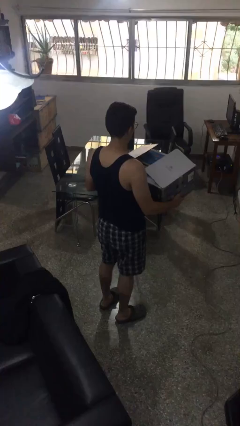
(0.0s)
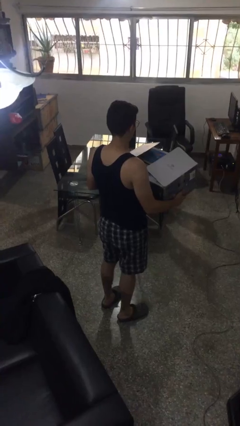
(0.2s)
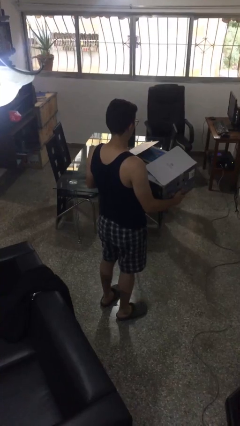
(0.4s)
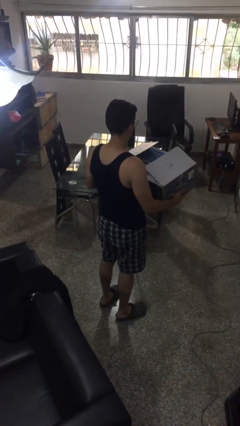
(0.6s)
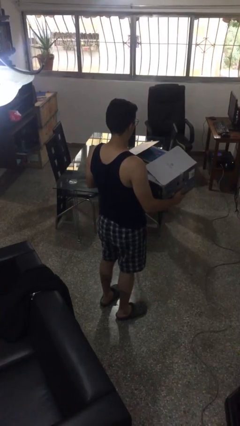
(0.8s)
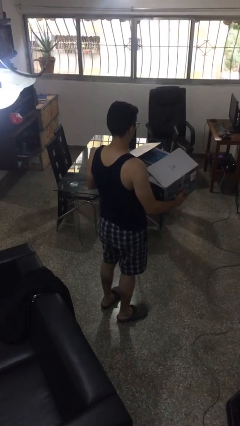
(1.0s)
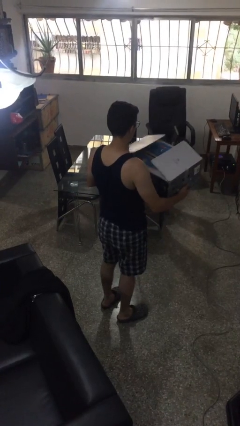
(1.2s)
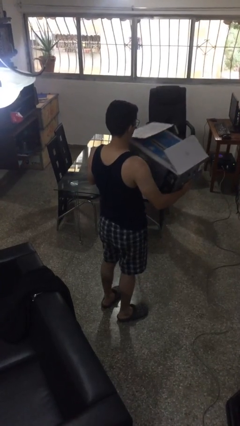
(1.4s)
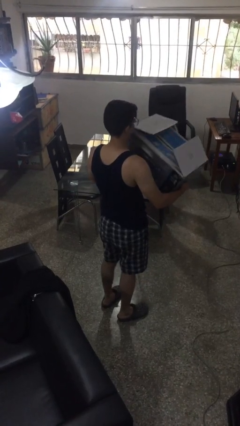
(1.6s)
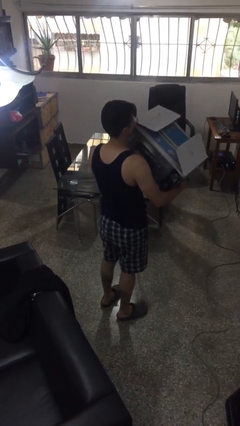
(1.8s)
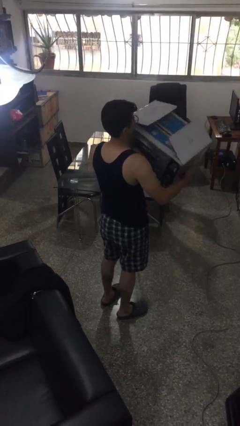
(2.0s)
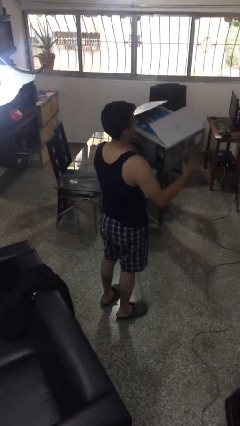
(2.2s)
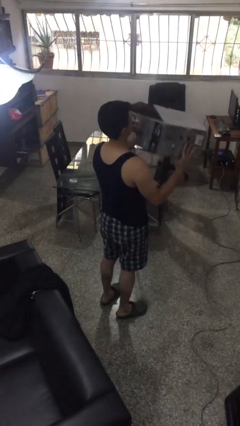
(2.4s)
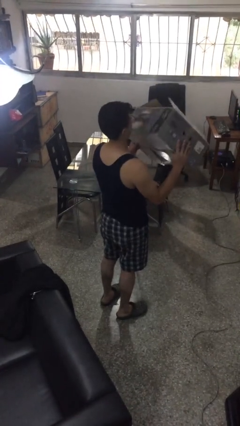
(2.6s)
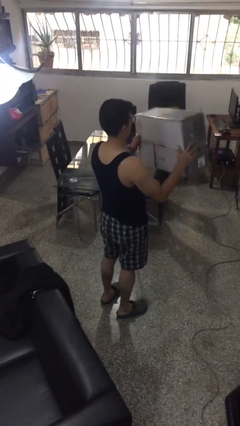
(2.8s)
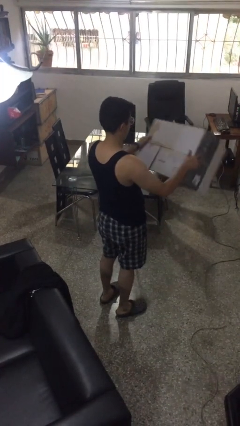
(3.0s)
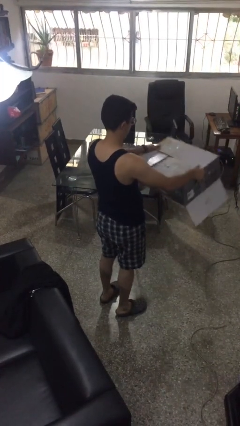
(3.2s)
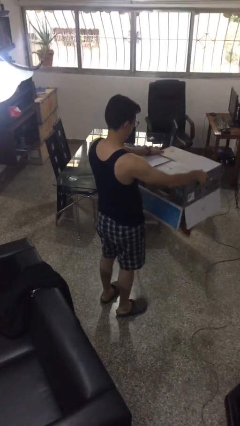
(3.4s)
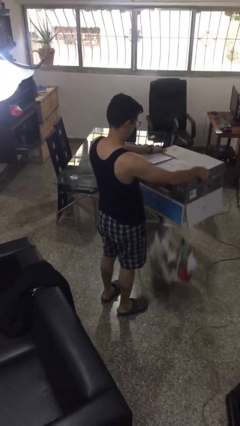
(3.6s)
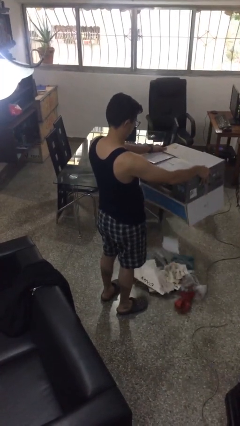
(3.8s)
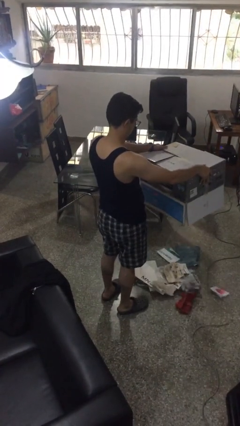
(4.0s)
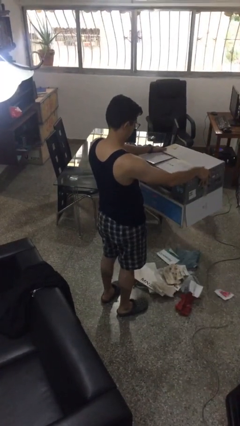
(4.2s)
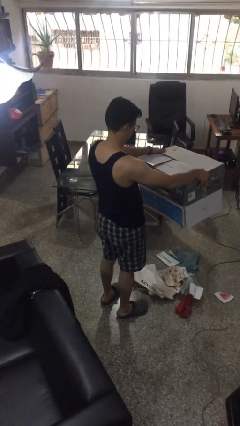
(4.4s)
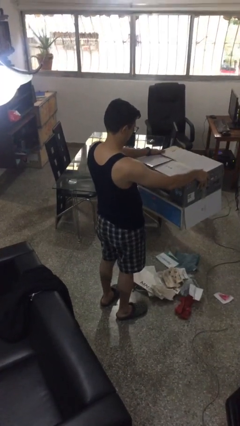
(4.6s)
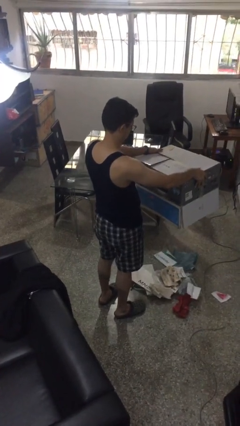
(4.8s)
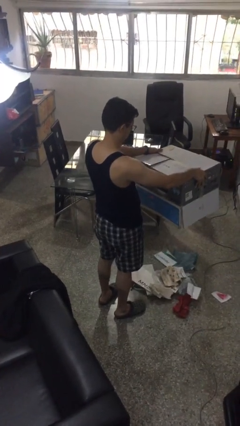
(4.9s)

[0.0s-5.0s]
person unloads box onto floor

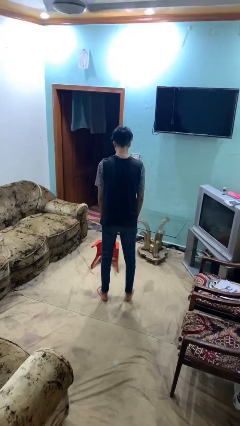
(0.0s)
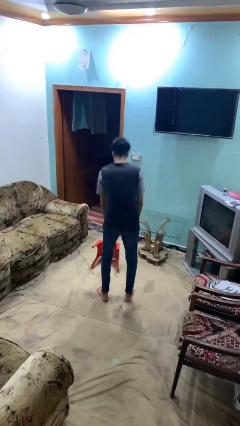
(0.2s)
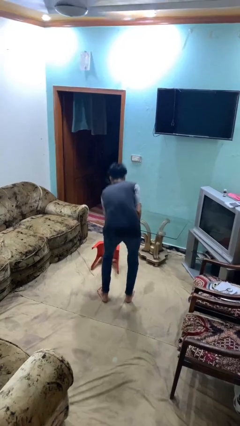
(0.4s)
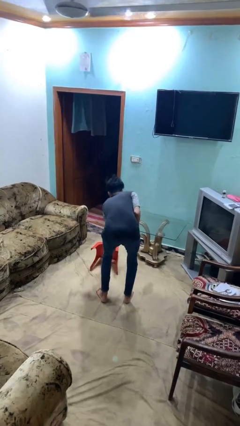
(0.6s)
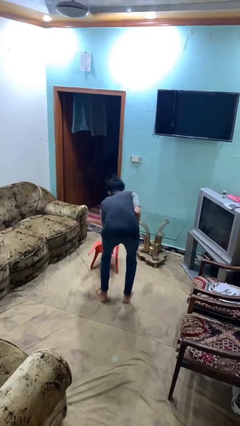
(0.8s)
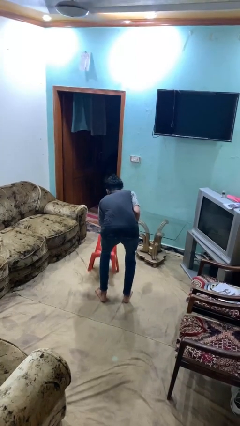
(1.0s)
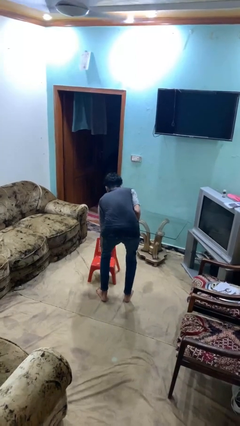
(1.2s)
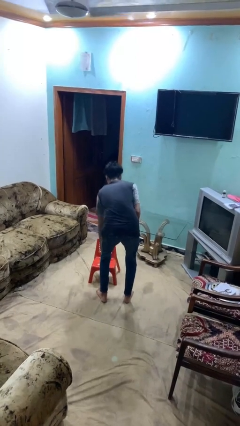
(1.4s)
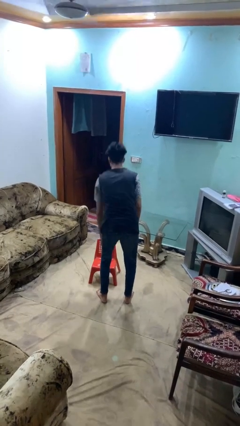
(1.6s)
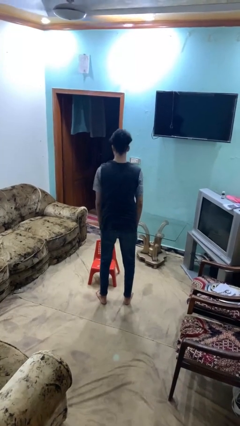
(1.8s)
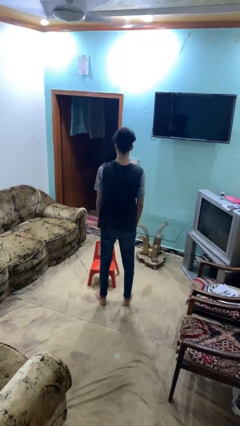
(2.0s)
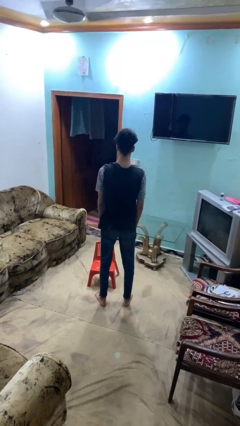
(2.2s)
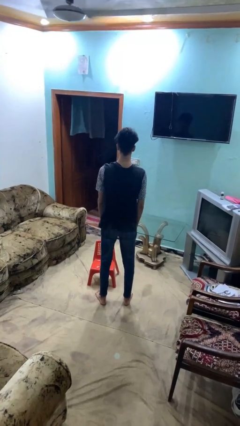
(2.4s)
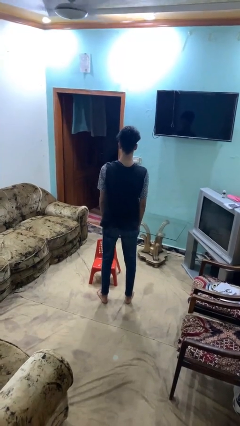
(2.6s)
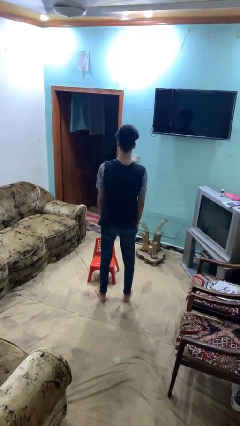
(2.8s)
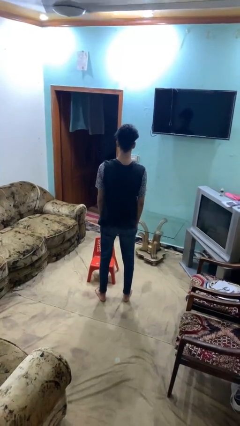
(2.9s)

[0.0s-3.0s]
person sets upright furniture

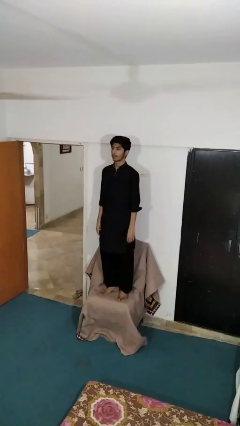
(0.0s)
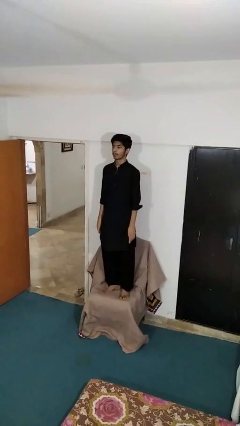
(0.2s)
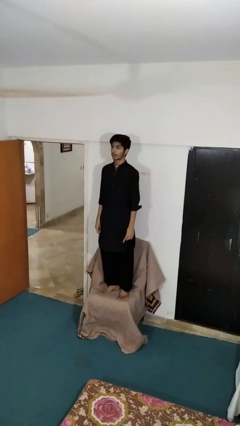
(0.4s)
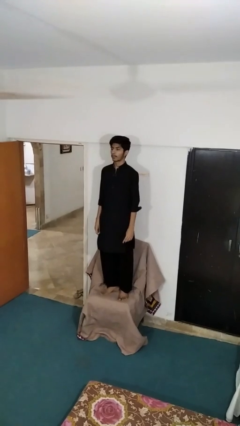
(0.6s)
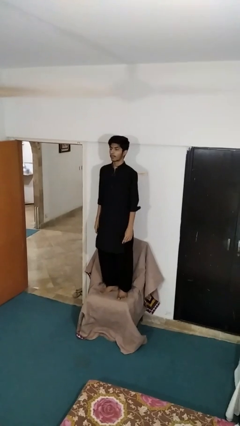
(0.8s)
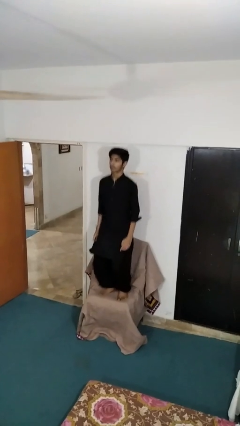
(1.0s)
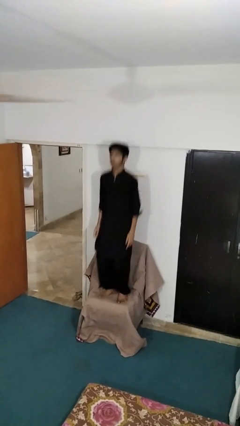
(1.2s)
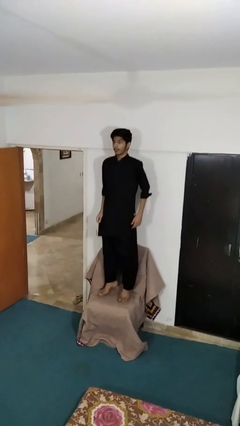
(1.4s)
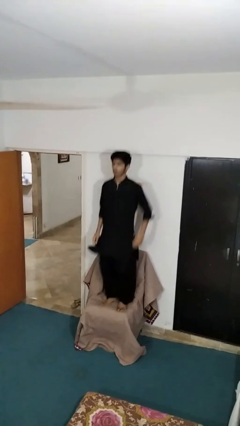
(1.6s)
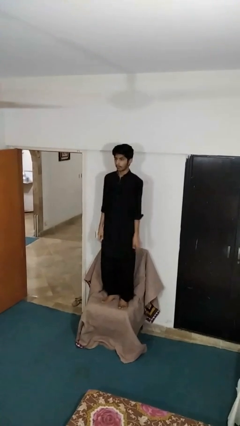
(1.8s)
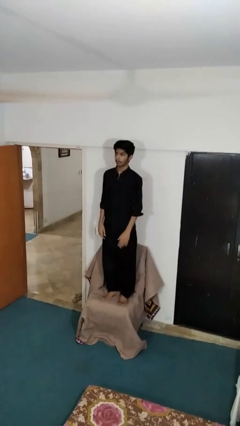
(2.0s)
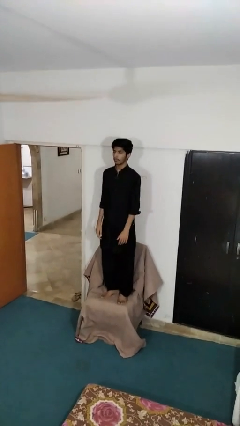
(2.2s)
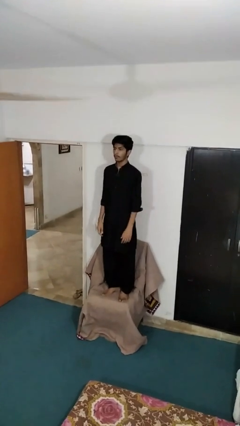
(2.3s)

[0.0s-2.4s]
person jumps on couch

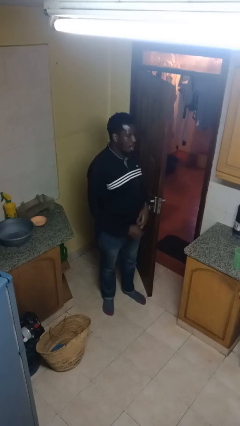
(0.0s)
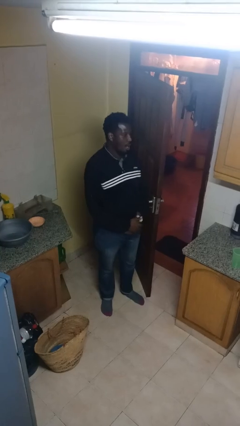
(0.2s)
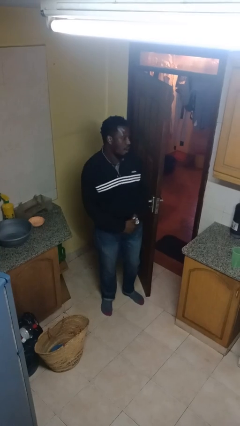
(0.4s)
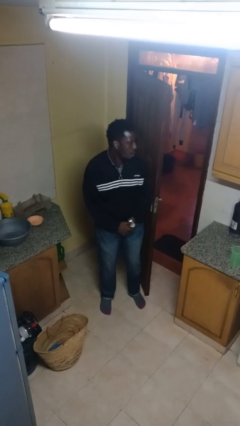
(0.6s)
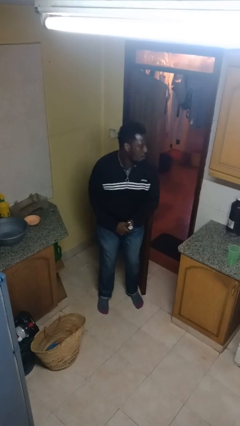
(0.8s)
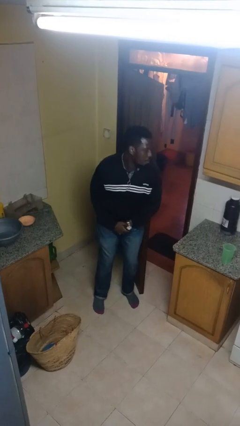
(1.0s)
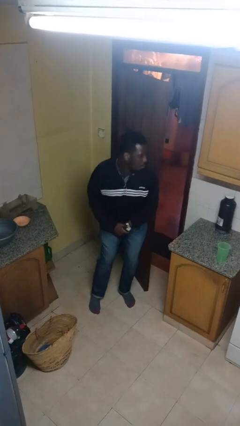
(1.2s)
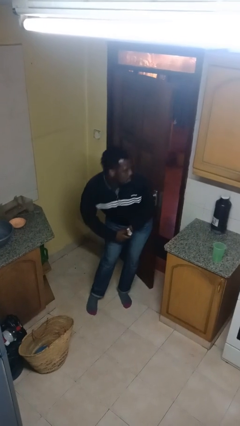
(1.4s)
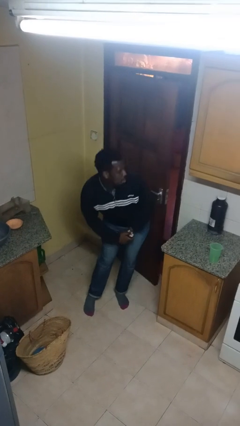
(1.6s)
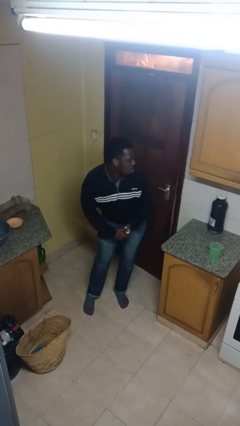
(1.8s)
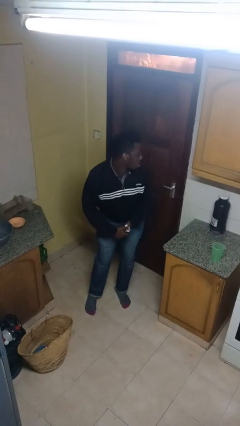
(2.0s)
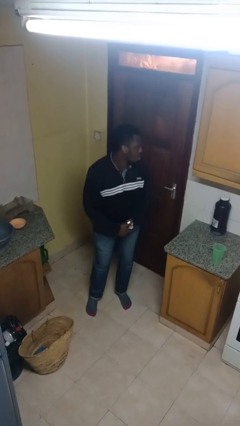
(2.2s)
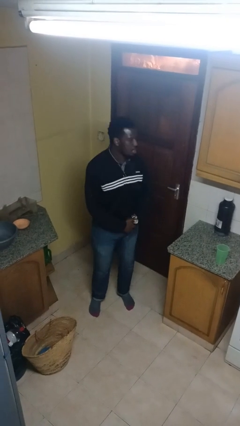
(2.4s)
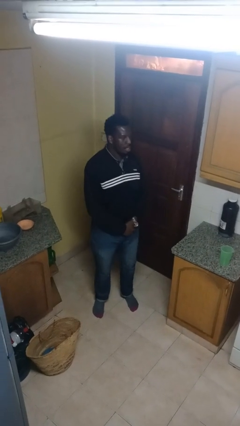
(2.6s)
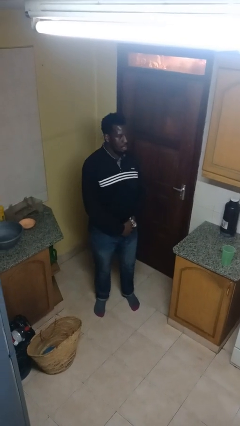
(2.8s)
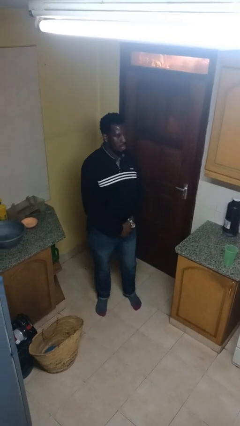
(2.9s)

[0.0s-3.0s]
person closes door with hip

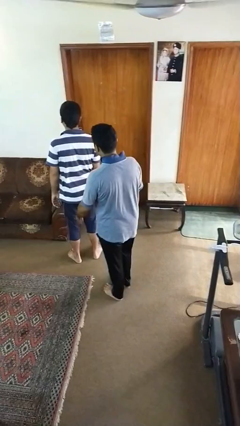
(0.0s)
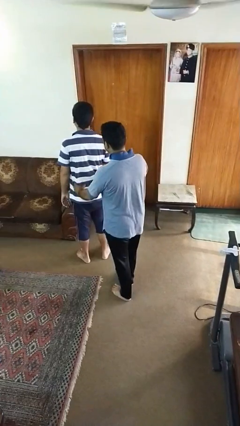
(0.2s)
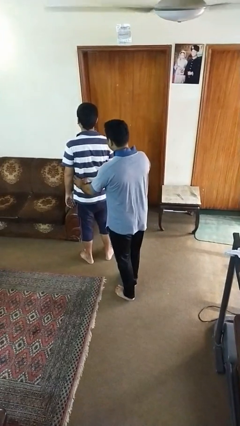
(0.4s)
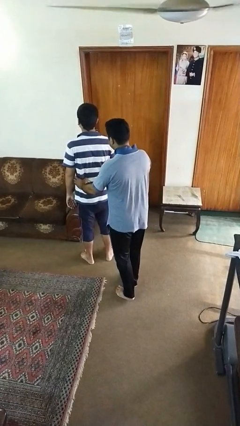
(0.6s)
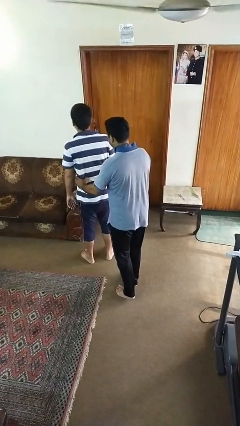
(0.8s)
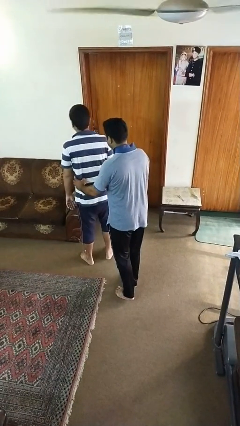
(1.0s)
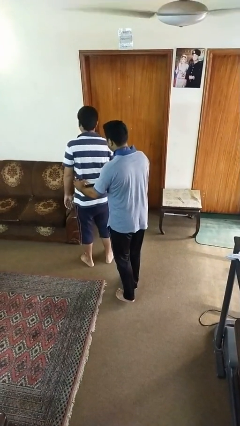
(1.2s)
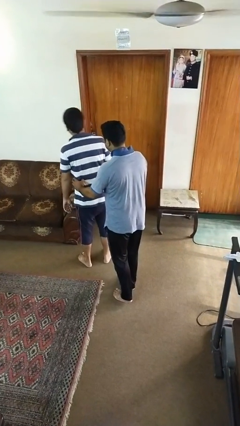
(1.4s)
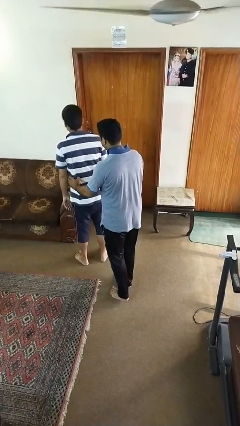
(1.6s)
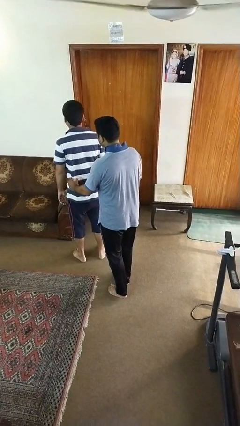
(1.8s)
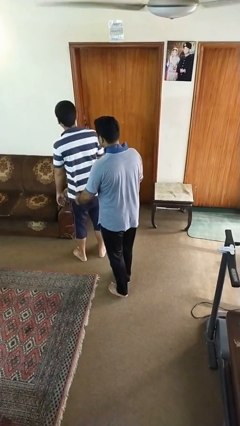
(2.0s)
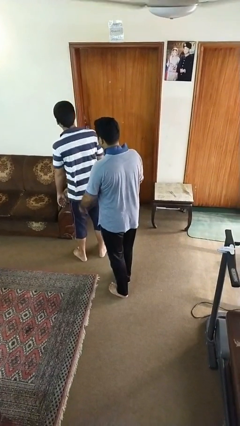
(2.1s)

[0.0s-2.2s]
person tickles person

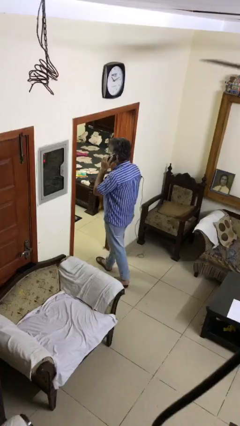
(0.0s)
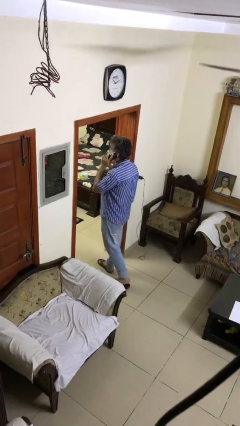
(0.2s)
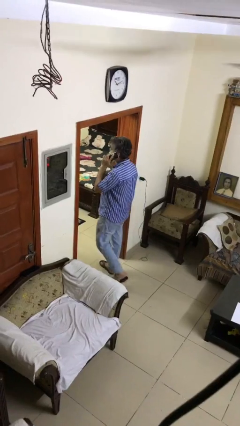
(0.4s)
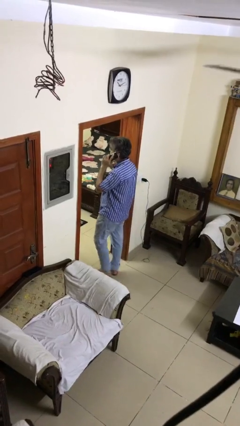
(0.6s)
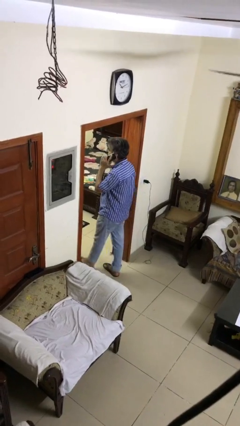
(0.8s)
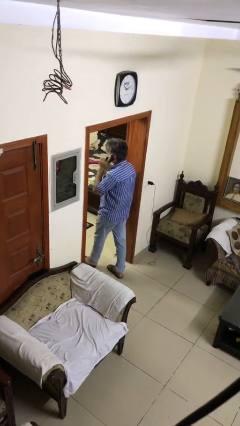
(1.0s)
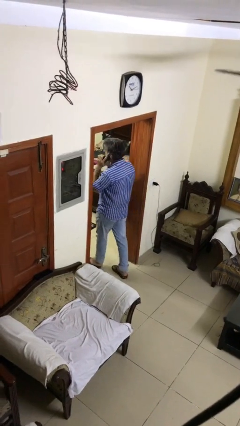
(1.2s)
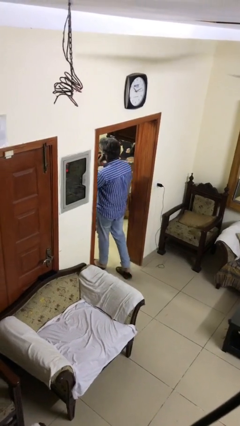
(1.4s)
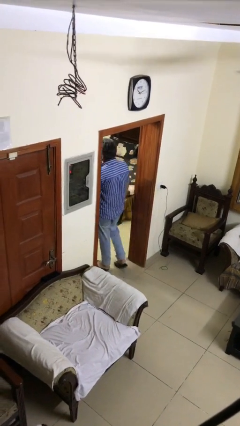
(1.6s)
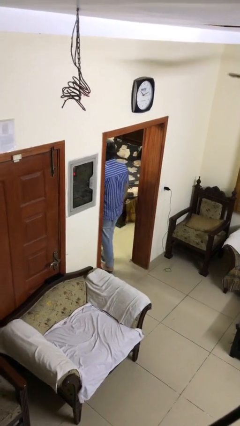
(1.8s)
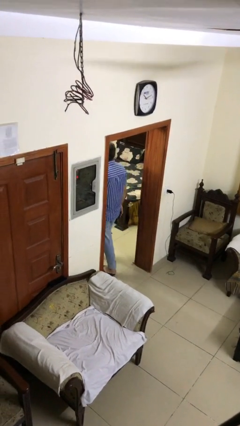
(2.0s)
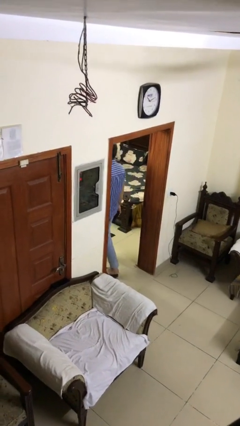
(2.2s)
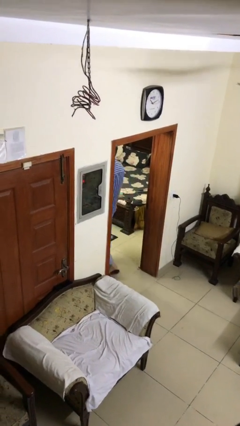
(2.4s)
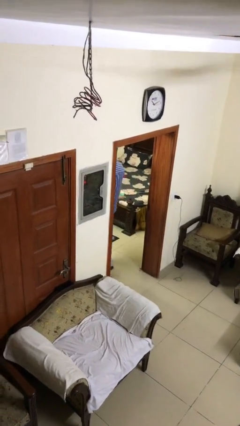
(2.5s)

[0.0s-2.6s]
person exits scene through structure
